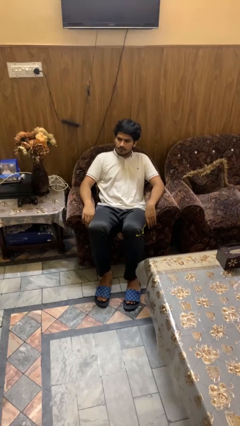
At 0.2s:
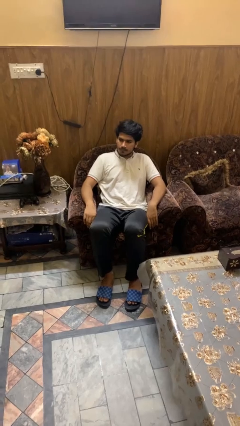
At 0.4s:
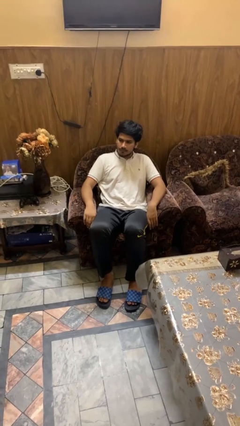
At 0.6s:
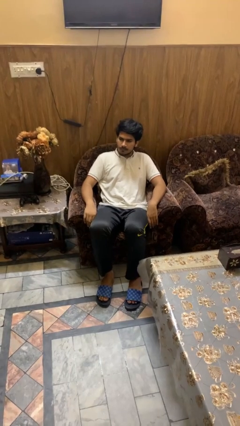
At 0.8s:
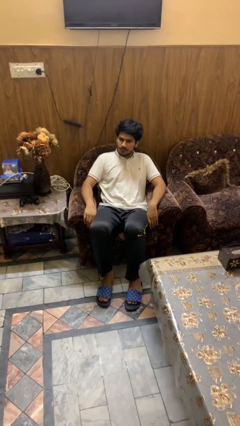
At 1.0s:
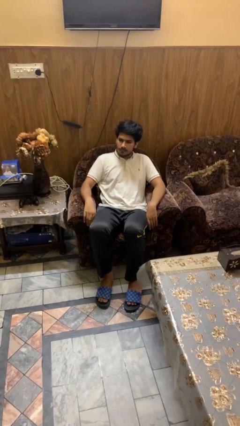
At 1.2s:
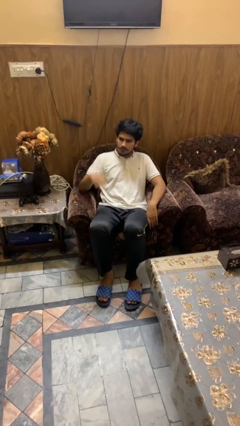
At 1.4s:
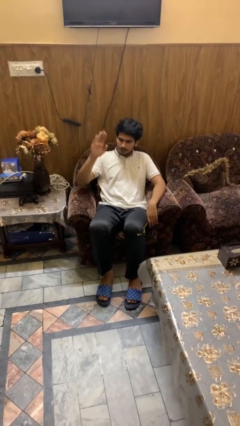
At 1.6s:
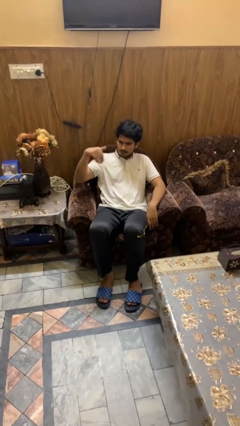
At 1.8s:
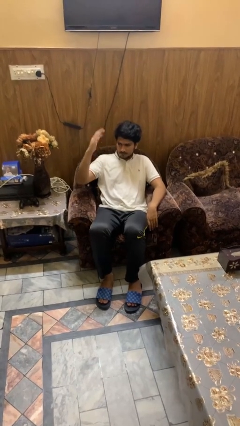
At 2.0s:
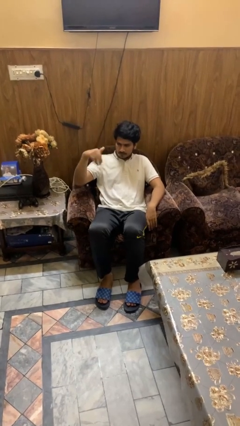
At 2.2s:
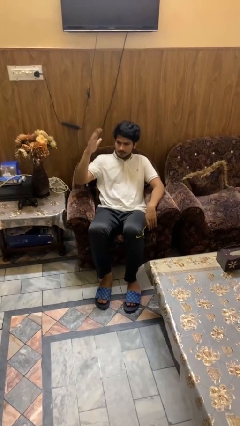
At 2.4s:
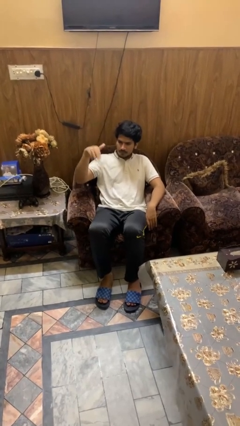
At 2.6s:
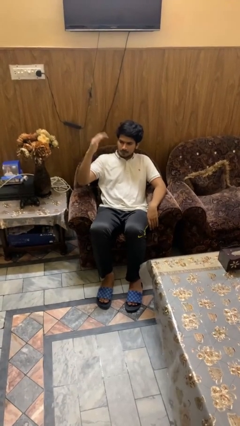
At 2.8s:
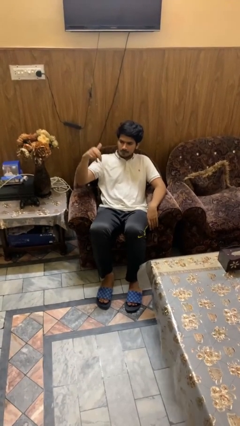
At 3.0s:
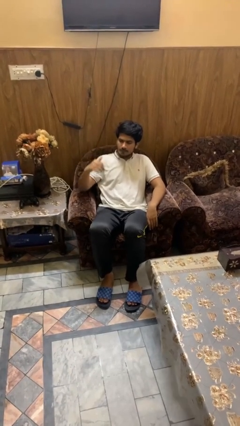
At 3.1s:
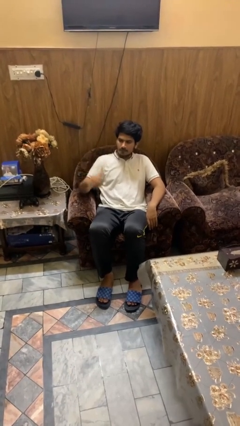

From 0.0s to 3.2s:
person gestures come here

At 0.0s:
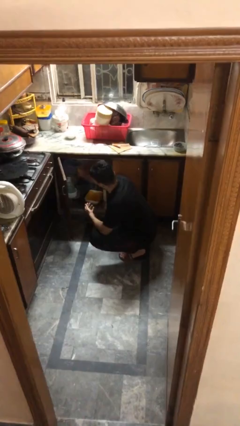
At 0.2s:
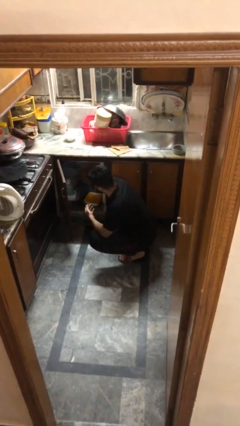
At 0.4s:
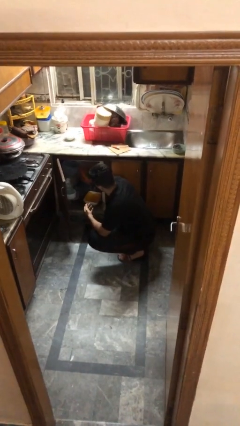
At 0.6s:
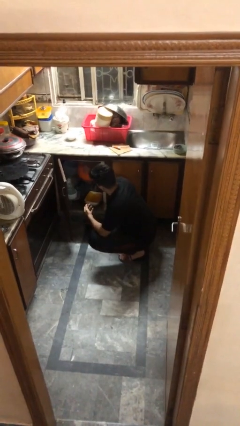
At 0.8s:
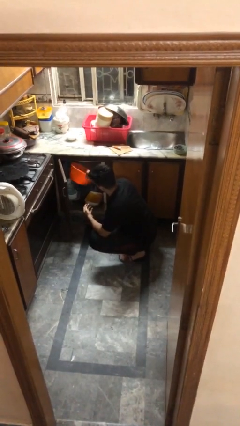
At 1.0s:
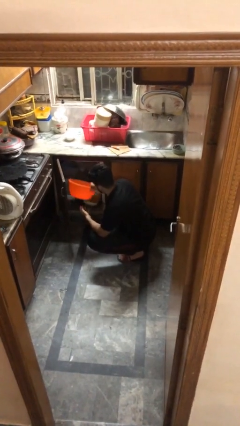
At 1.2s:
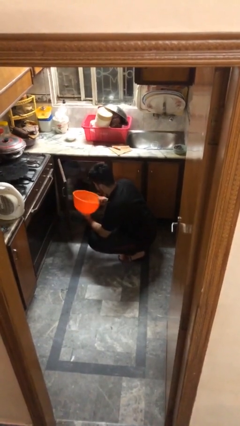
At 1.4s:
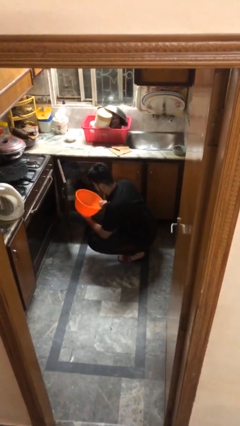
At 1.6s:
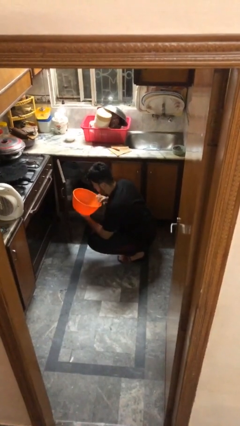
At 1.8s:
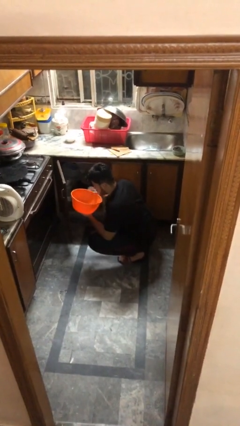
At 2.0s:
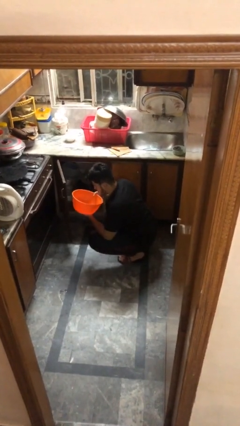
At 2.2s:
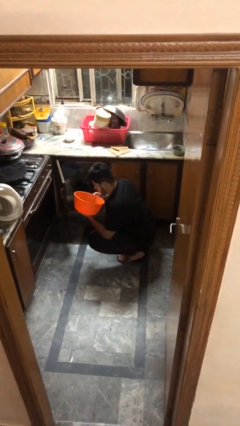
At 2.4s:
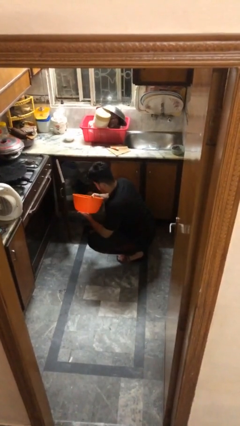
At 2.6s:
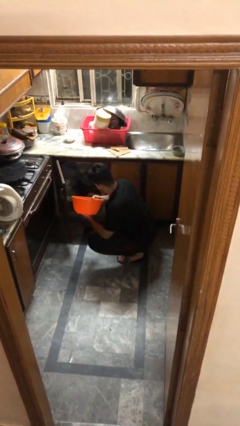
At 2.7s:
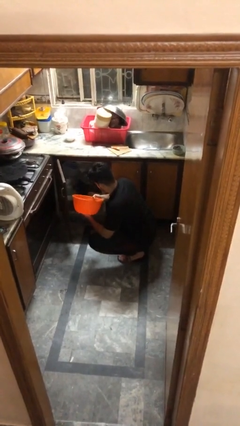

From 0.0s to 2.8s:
person takes object from kitchen drawer

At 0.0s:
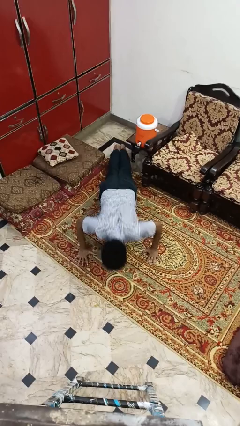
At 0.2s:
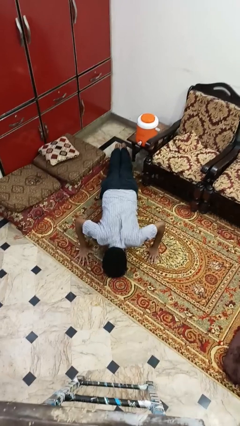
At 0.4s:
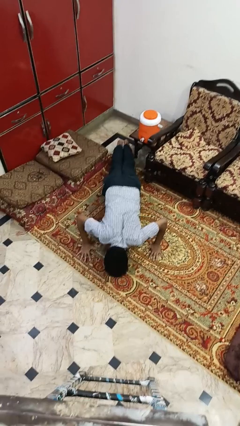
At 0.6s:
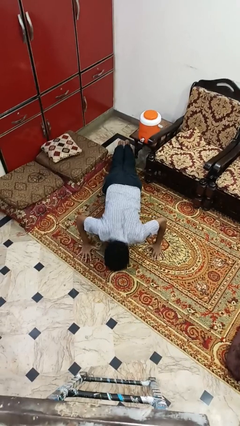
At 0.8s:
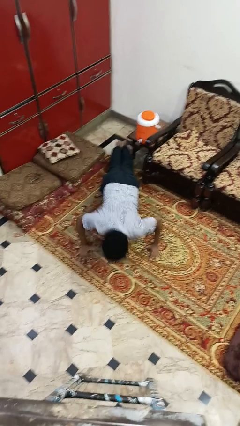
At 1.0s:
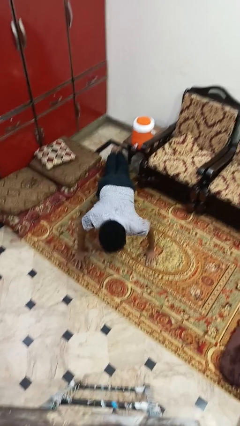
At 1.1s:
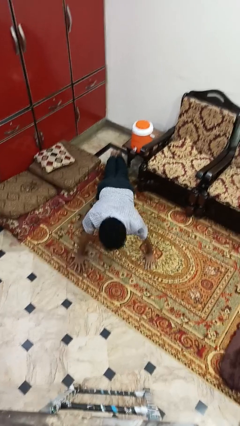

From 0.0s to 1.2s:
person exercises with pushup

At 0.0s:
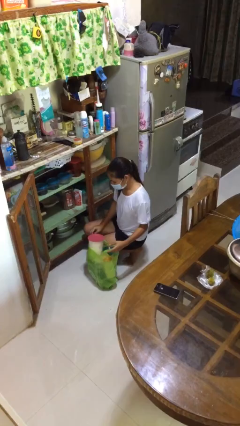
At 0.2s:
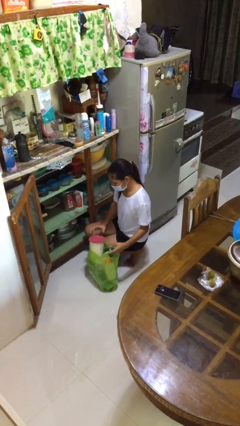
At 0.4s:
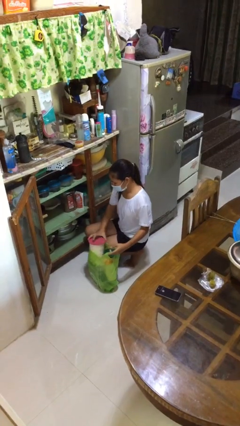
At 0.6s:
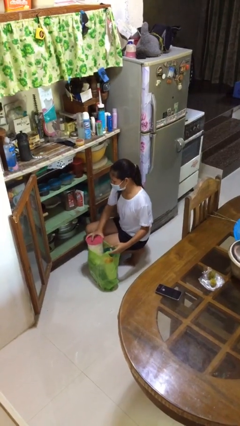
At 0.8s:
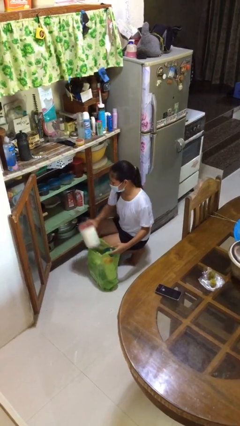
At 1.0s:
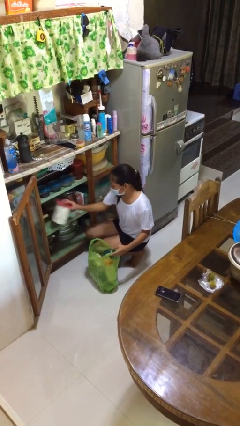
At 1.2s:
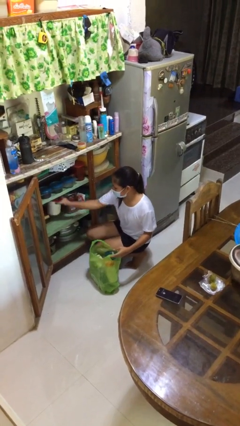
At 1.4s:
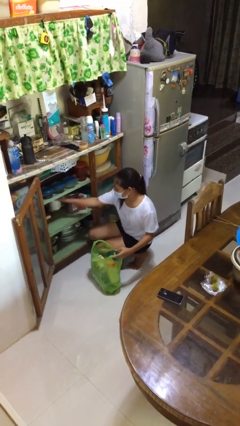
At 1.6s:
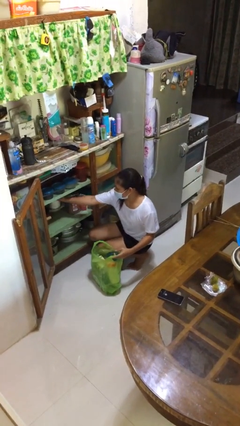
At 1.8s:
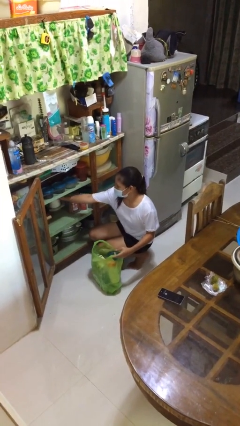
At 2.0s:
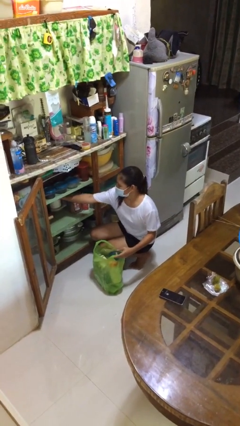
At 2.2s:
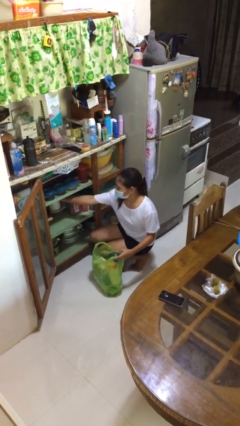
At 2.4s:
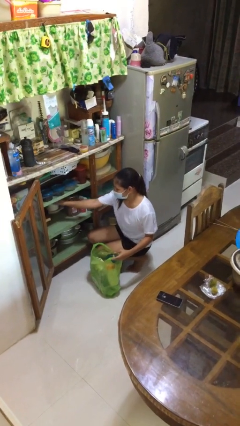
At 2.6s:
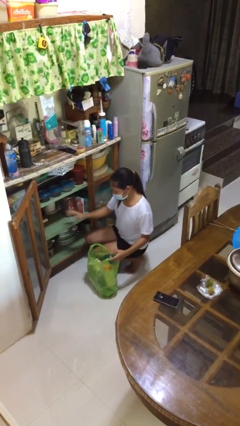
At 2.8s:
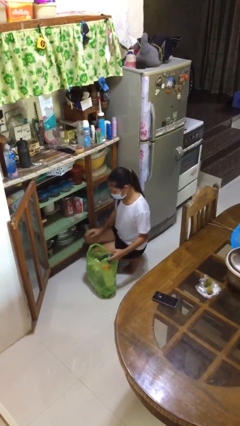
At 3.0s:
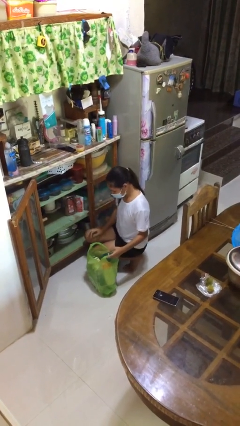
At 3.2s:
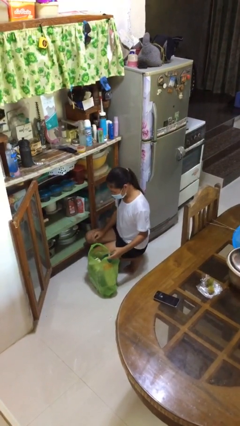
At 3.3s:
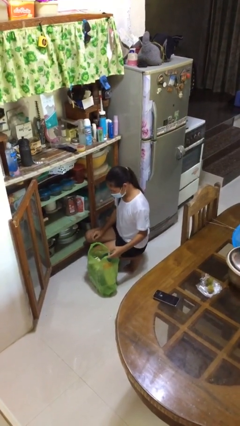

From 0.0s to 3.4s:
person loads groceries into cabinet

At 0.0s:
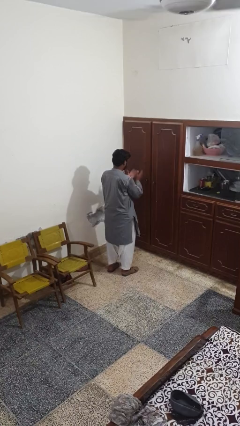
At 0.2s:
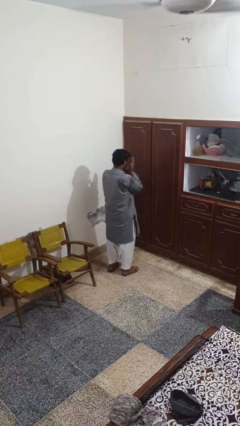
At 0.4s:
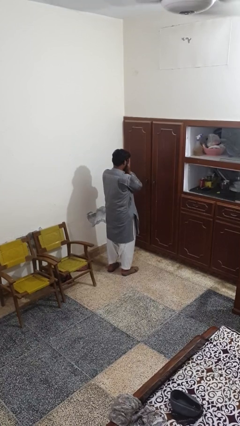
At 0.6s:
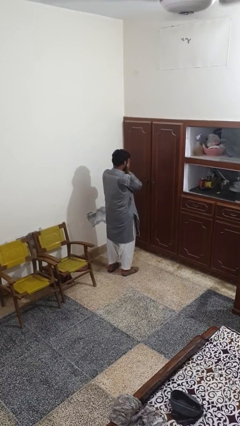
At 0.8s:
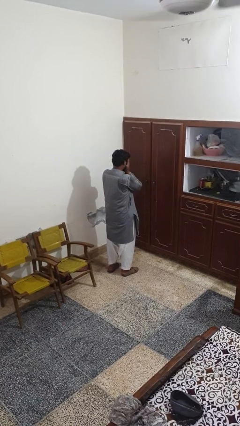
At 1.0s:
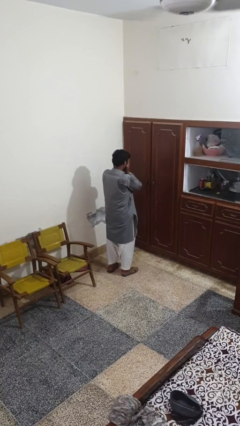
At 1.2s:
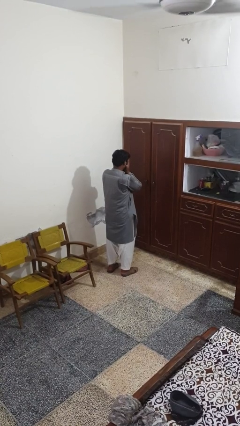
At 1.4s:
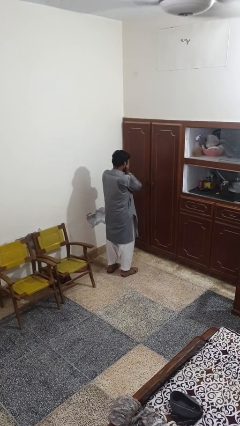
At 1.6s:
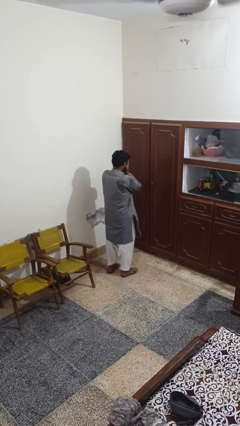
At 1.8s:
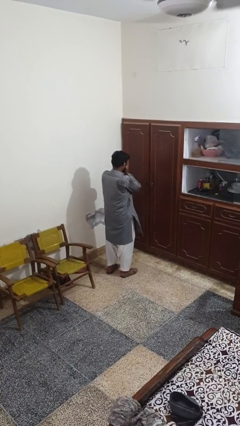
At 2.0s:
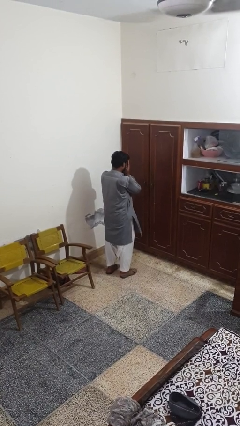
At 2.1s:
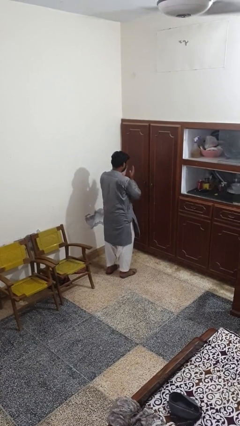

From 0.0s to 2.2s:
person covers face with hands

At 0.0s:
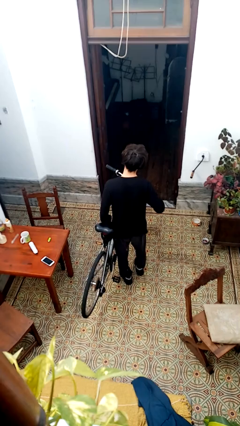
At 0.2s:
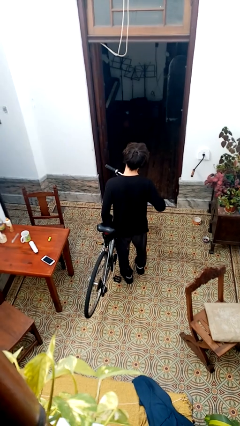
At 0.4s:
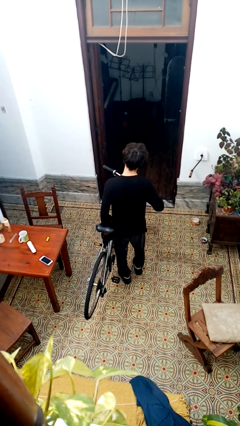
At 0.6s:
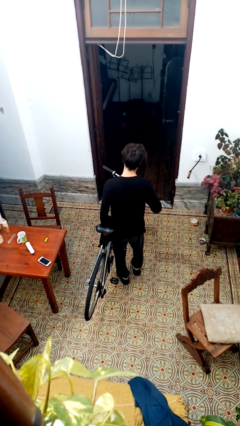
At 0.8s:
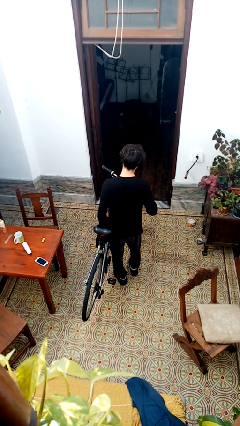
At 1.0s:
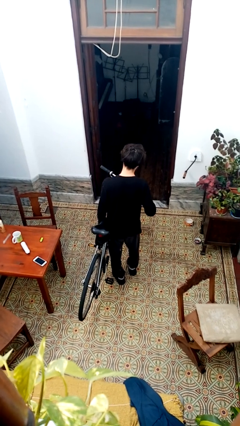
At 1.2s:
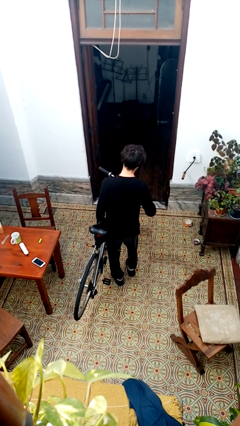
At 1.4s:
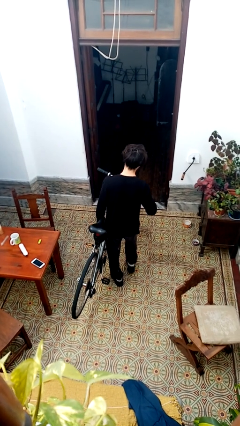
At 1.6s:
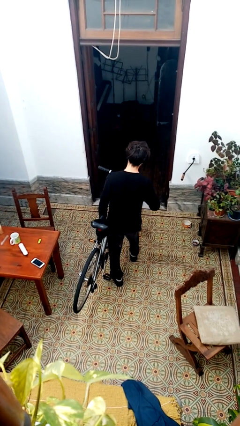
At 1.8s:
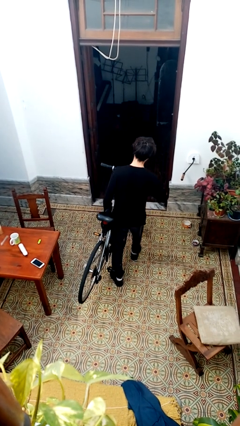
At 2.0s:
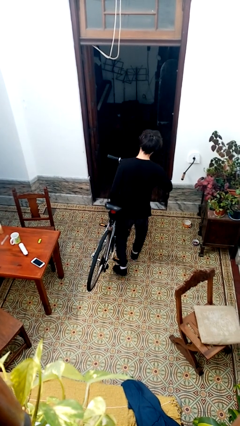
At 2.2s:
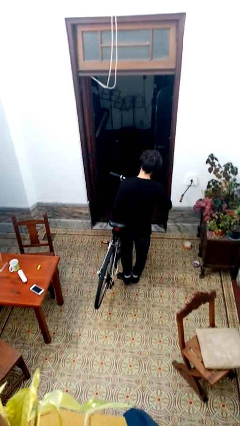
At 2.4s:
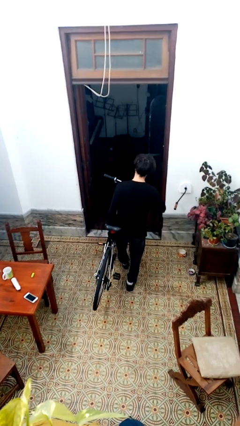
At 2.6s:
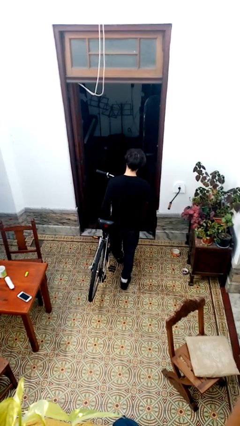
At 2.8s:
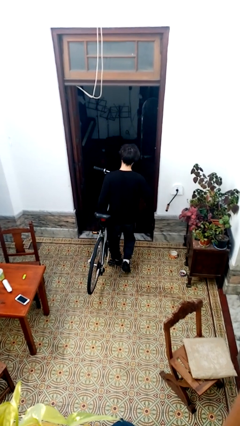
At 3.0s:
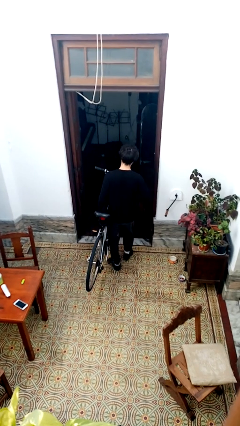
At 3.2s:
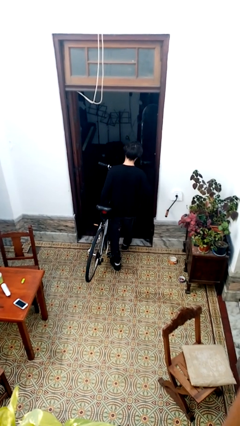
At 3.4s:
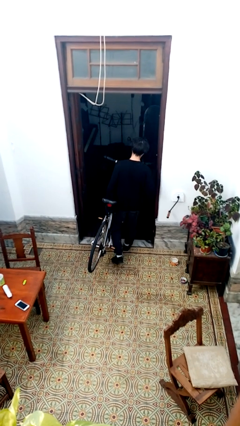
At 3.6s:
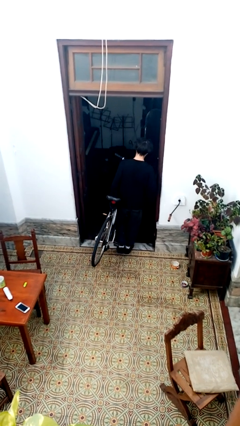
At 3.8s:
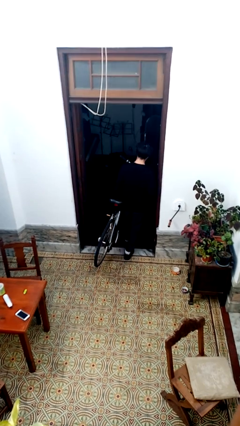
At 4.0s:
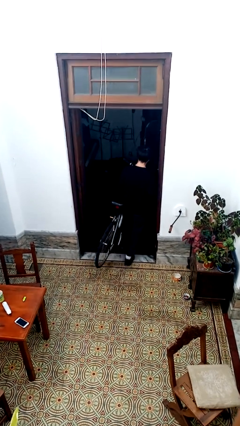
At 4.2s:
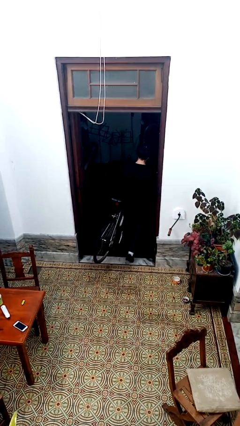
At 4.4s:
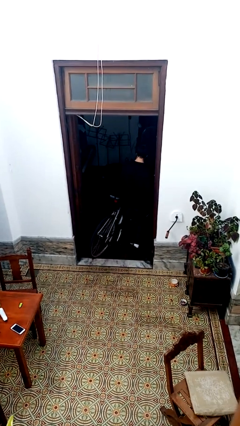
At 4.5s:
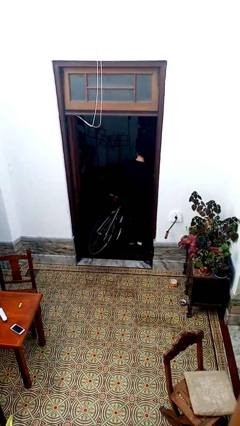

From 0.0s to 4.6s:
person carries bicycle
